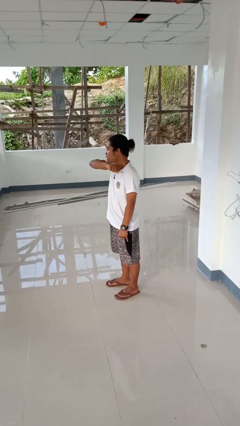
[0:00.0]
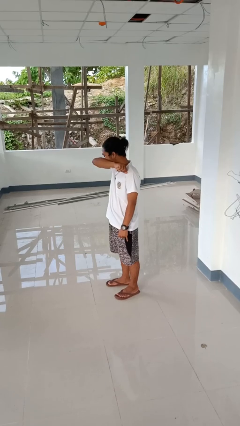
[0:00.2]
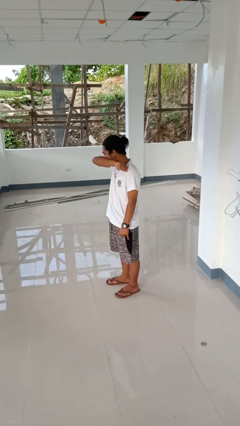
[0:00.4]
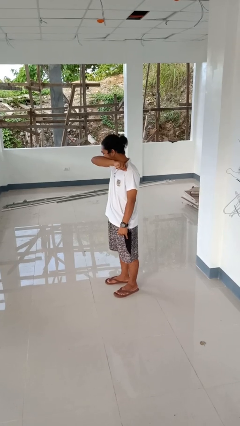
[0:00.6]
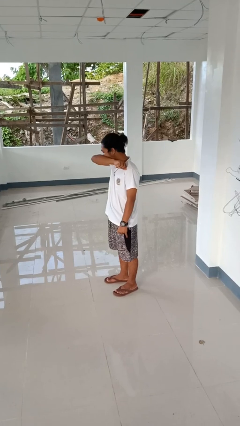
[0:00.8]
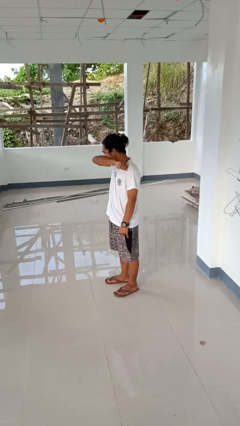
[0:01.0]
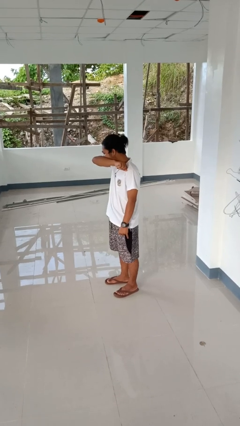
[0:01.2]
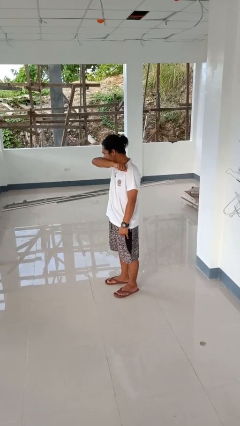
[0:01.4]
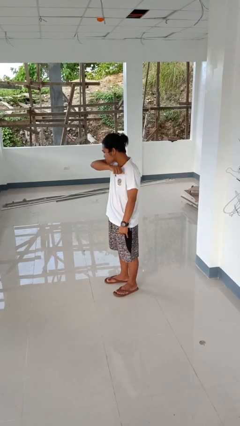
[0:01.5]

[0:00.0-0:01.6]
person sneezes into arm

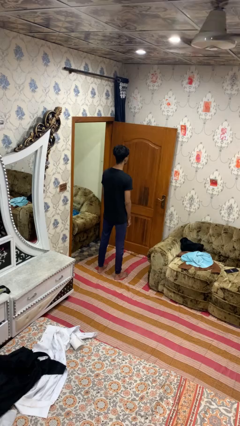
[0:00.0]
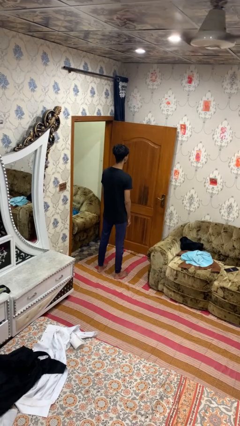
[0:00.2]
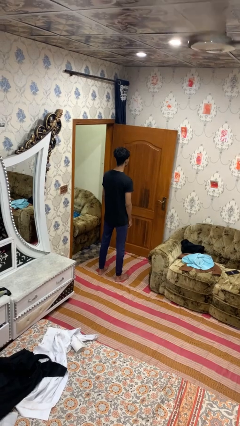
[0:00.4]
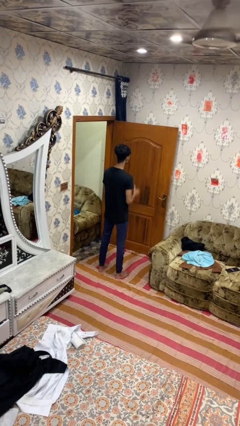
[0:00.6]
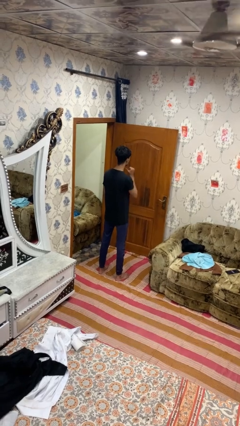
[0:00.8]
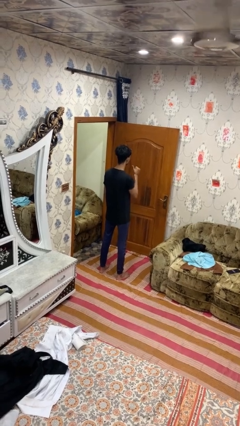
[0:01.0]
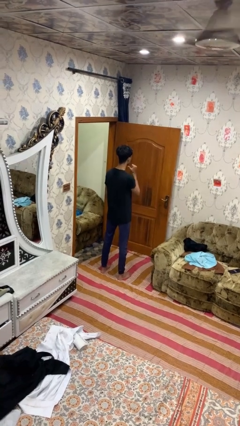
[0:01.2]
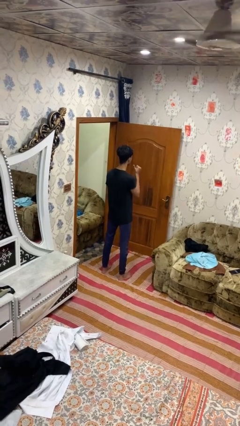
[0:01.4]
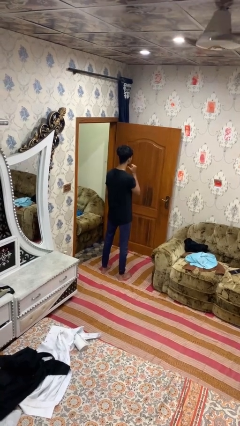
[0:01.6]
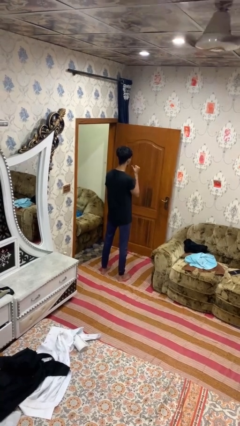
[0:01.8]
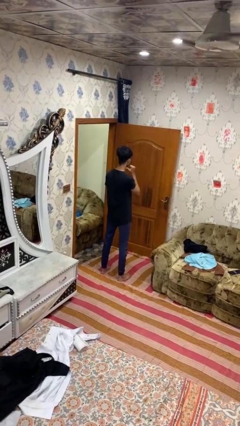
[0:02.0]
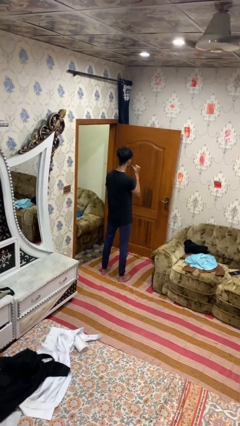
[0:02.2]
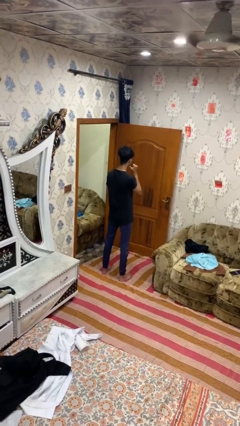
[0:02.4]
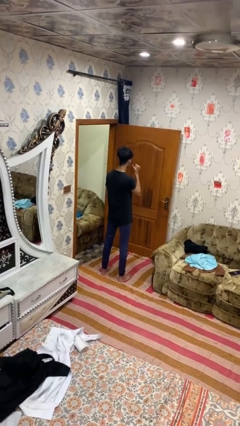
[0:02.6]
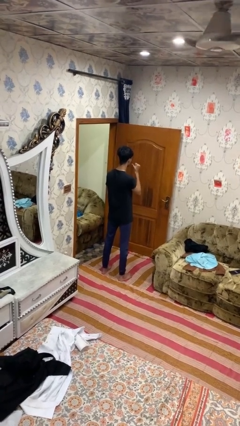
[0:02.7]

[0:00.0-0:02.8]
person gestures behind me

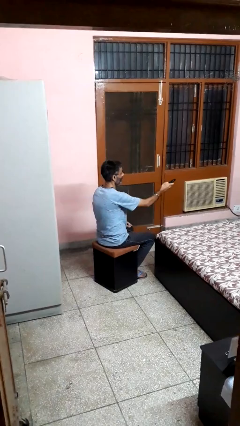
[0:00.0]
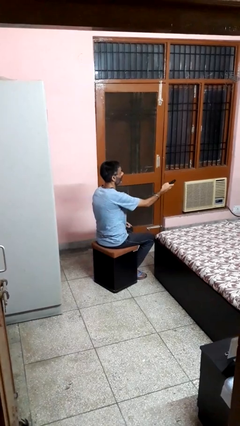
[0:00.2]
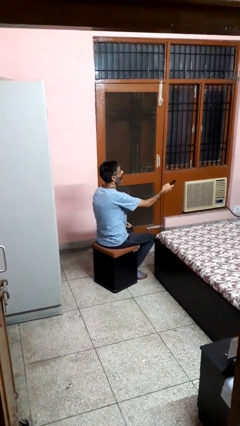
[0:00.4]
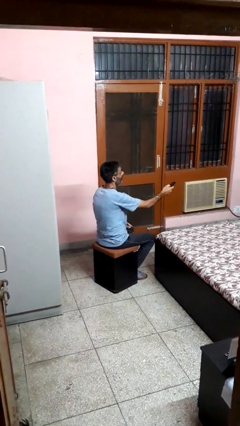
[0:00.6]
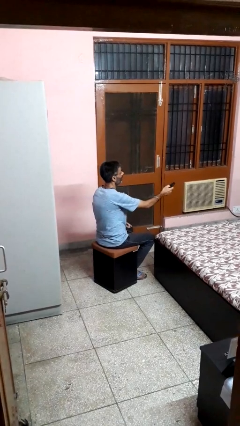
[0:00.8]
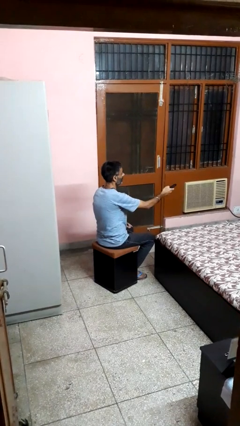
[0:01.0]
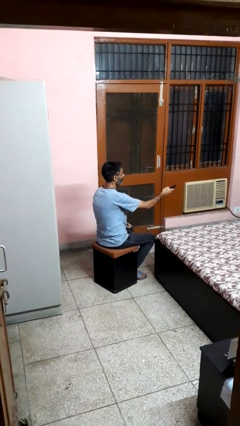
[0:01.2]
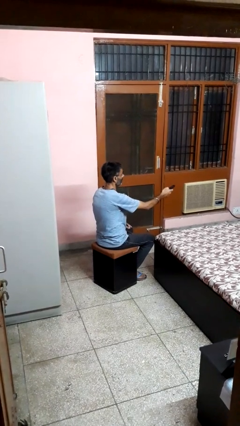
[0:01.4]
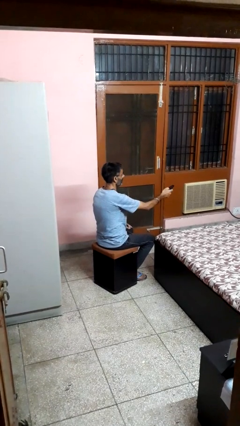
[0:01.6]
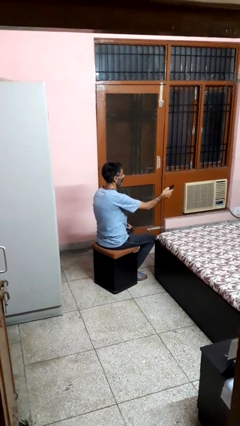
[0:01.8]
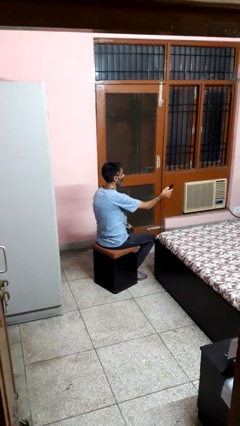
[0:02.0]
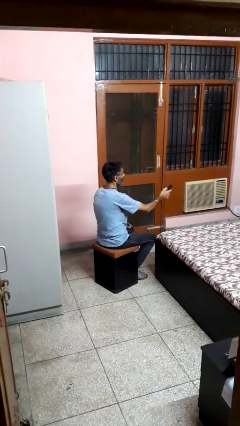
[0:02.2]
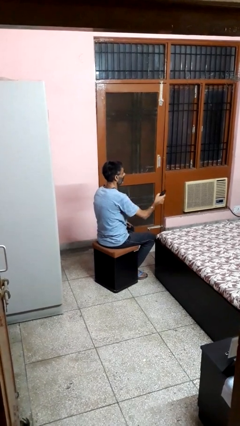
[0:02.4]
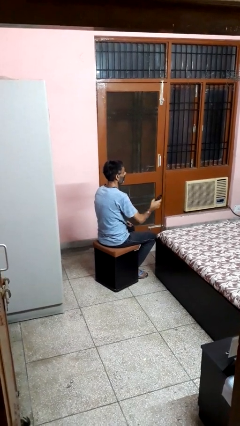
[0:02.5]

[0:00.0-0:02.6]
person uses television remote

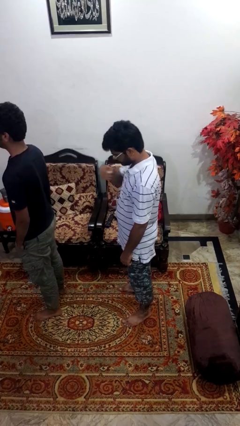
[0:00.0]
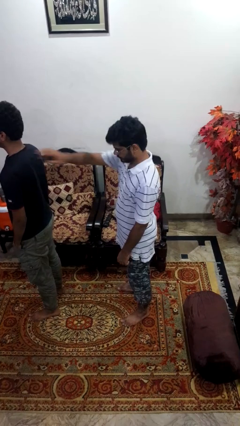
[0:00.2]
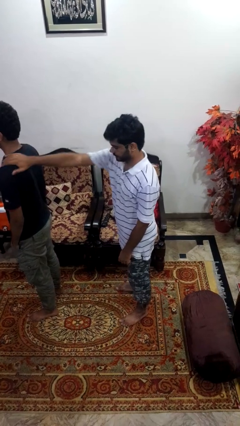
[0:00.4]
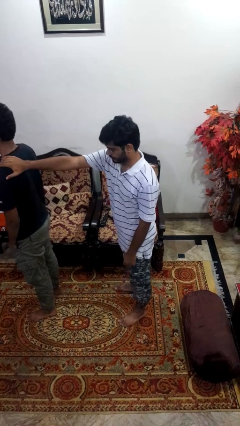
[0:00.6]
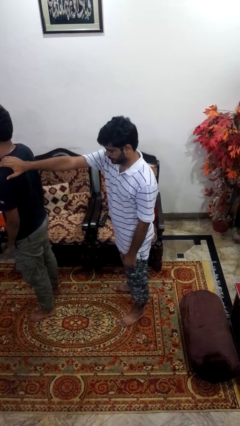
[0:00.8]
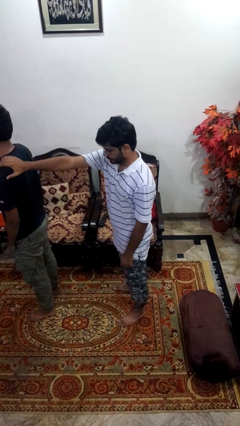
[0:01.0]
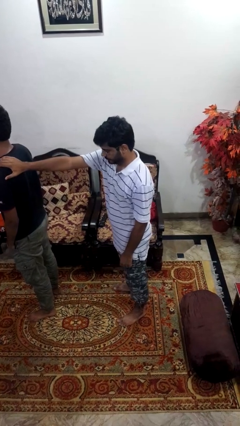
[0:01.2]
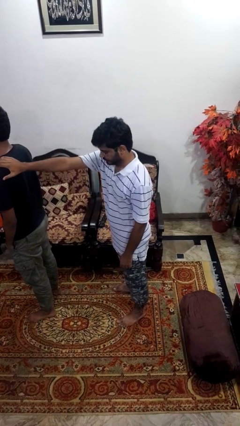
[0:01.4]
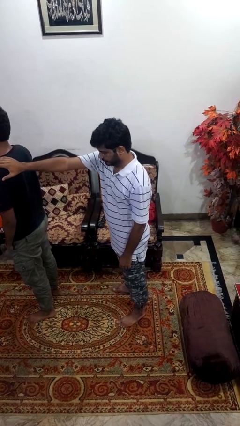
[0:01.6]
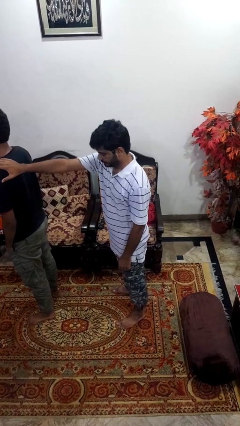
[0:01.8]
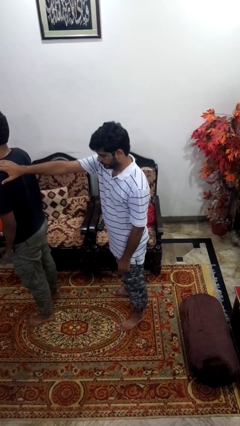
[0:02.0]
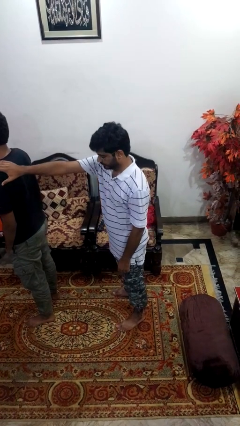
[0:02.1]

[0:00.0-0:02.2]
person grabs person by shoulder

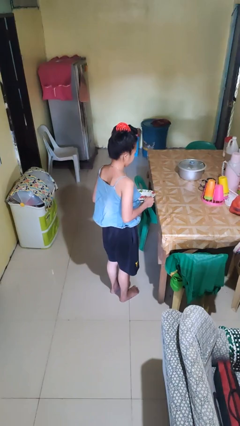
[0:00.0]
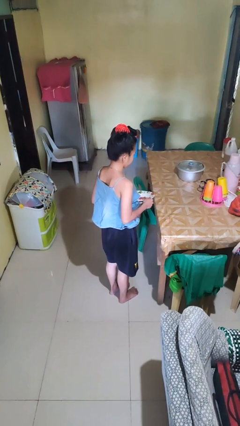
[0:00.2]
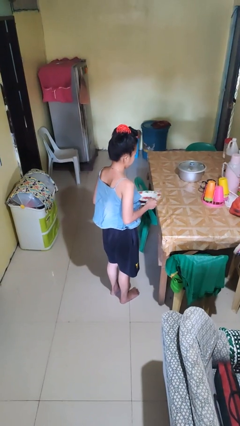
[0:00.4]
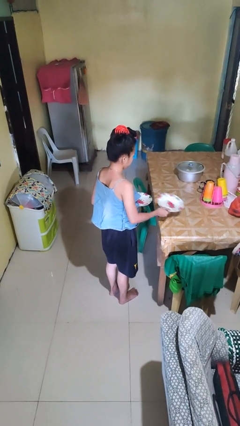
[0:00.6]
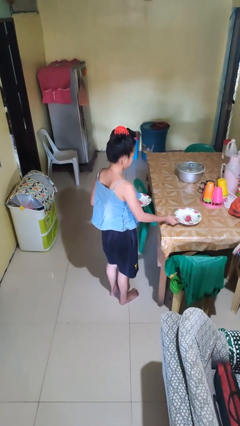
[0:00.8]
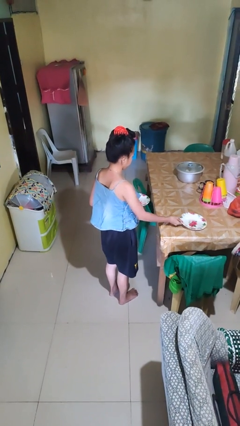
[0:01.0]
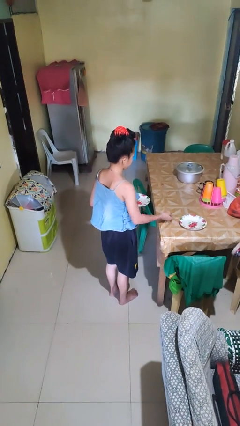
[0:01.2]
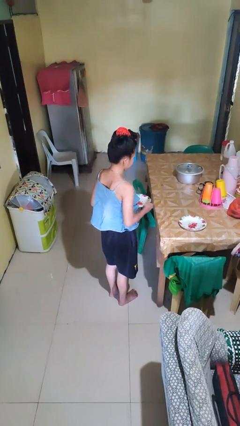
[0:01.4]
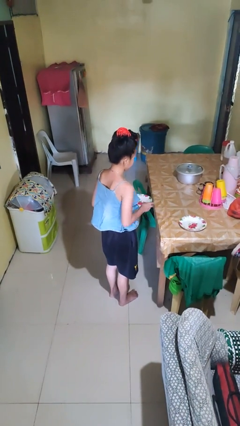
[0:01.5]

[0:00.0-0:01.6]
person sets table

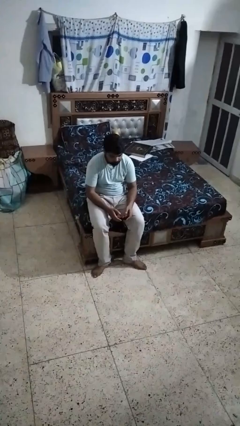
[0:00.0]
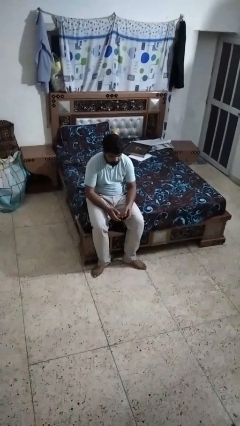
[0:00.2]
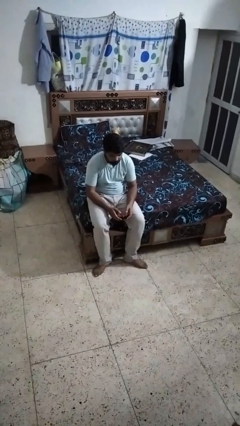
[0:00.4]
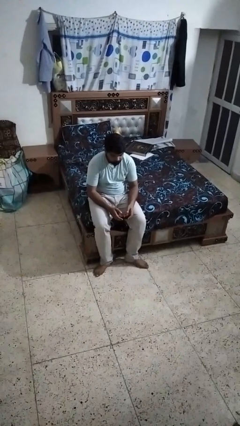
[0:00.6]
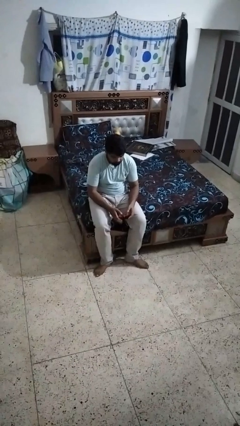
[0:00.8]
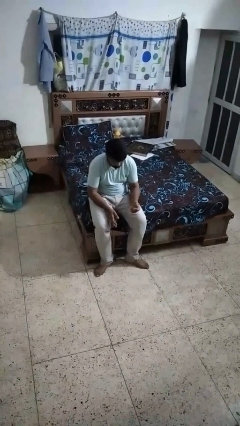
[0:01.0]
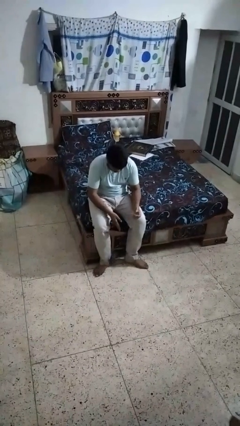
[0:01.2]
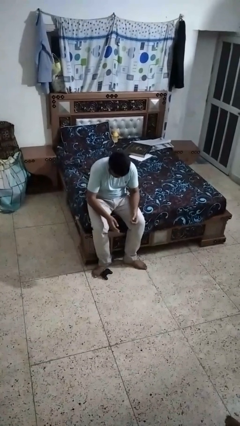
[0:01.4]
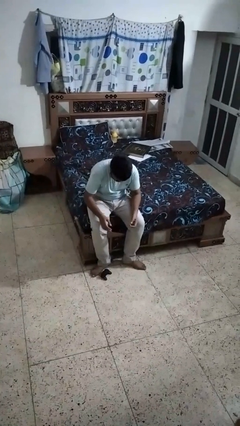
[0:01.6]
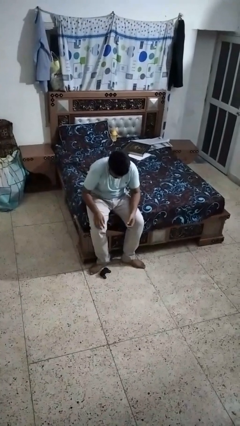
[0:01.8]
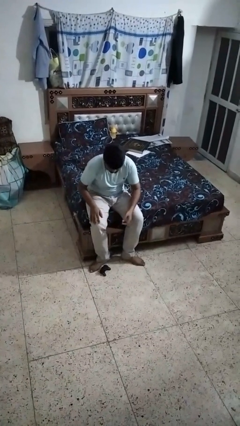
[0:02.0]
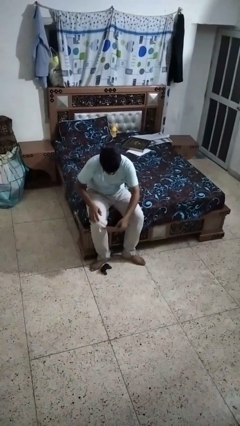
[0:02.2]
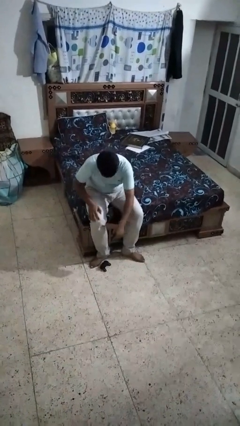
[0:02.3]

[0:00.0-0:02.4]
person drops object

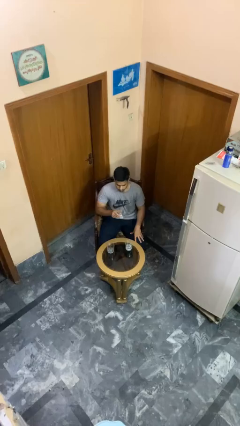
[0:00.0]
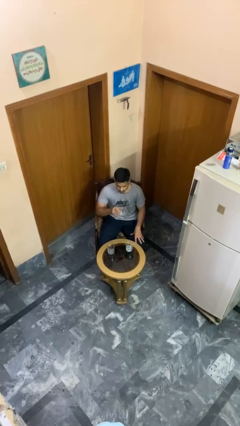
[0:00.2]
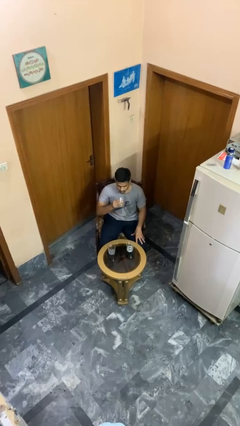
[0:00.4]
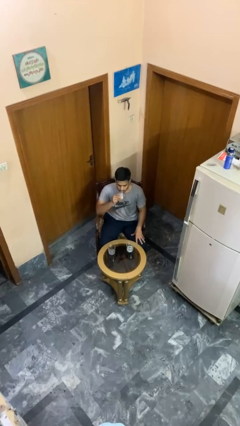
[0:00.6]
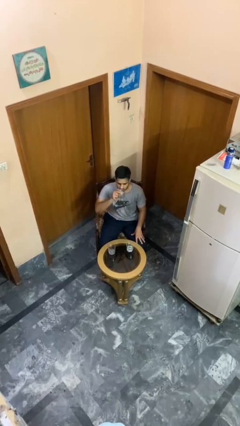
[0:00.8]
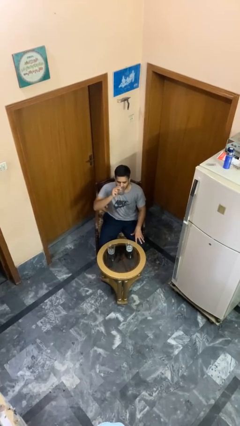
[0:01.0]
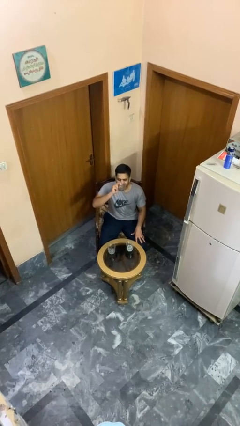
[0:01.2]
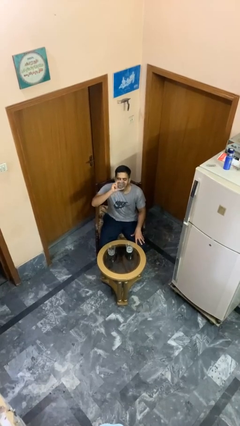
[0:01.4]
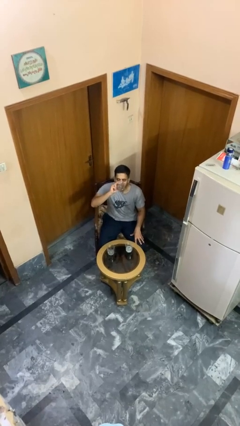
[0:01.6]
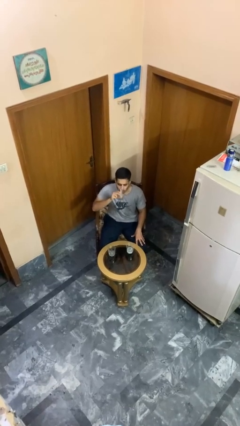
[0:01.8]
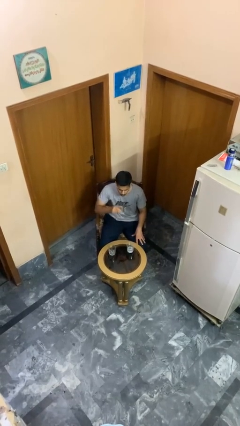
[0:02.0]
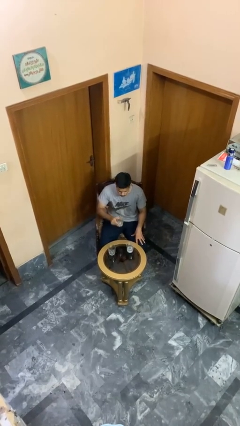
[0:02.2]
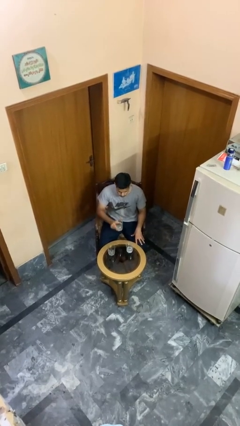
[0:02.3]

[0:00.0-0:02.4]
person drinks from shotglass

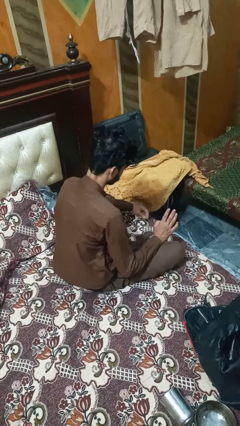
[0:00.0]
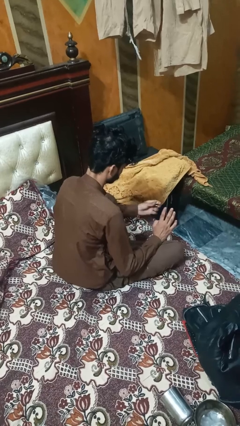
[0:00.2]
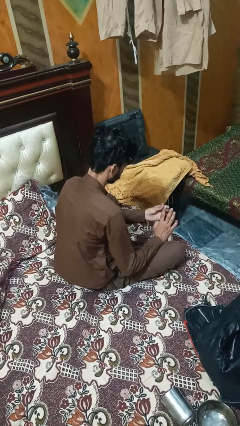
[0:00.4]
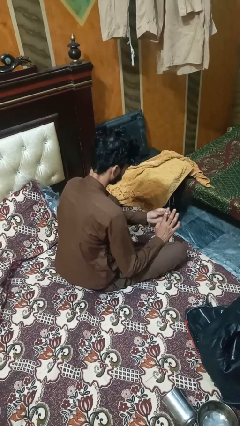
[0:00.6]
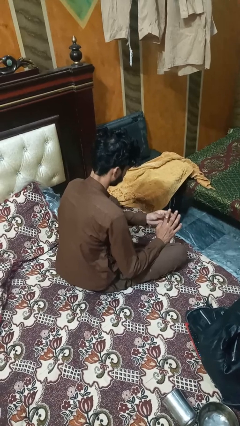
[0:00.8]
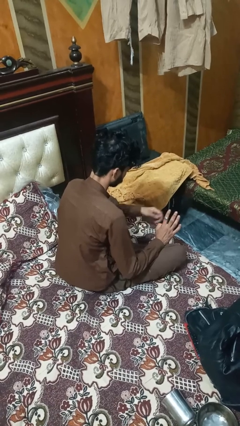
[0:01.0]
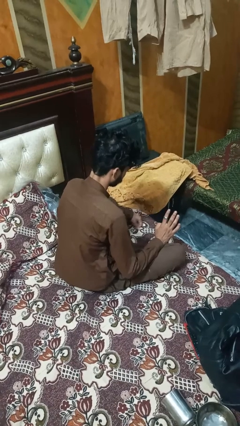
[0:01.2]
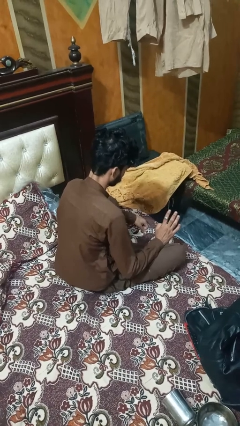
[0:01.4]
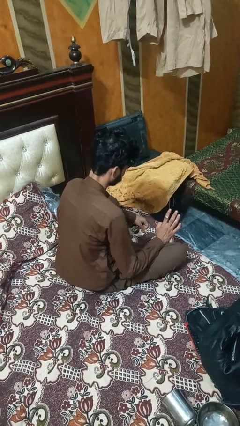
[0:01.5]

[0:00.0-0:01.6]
person puts on ring
